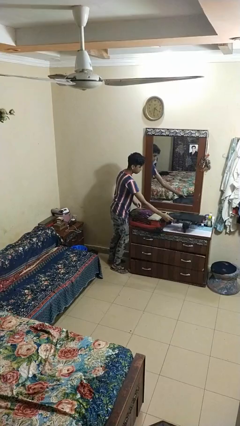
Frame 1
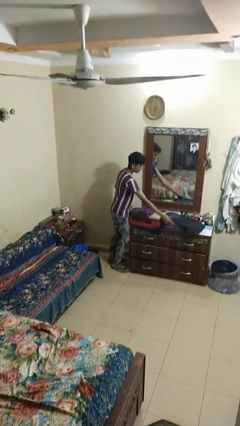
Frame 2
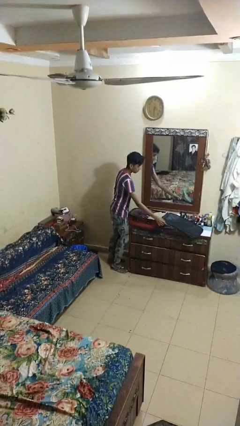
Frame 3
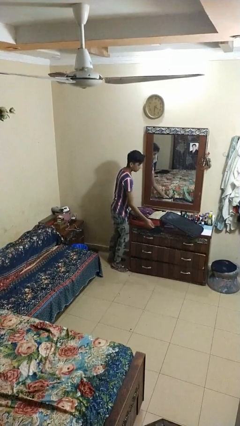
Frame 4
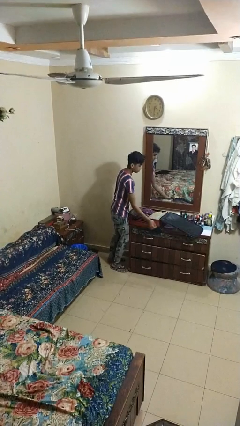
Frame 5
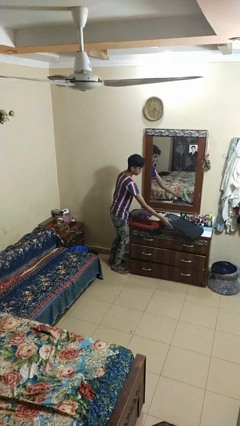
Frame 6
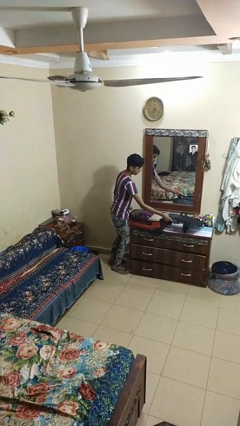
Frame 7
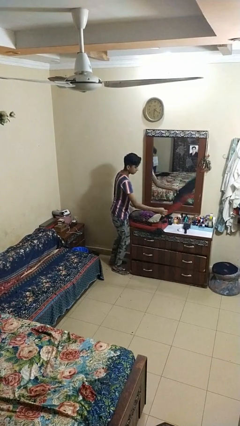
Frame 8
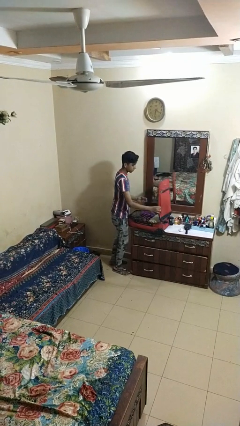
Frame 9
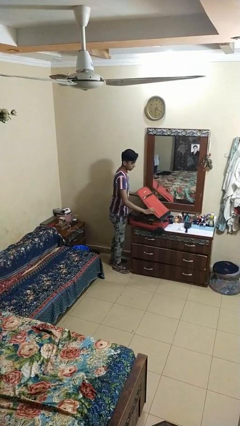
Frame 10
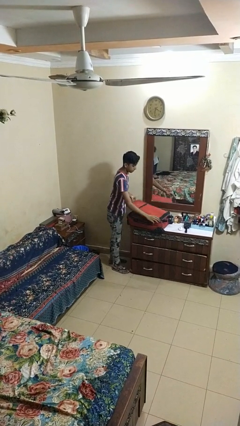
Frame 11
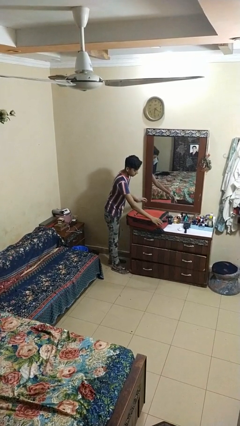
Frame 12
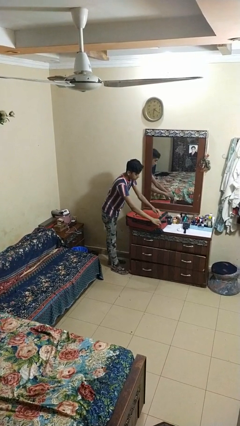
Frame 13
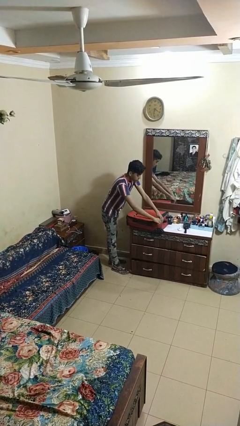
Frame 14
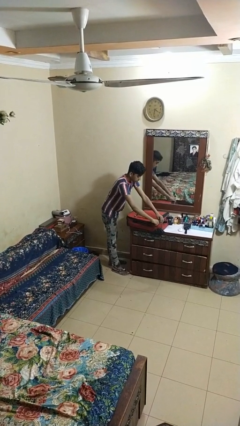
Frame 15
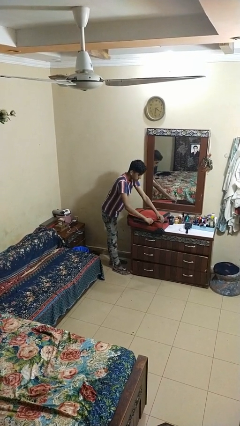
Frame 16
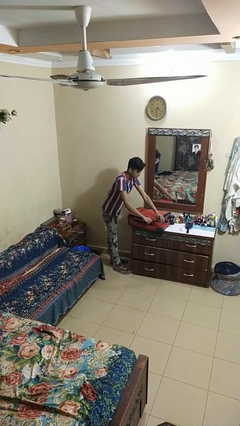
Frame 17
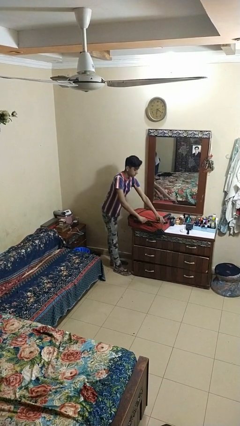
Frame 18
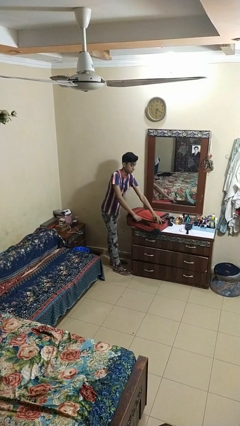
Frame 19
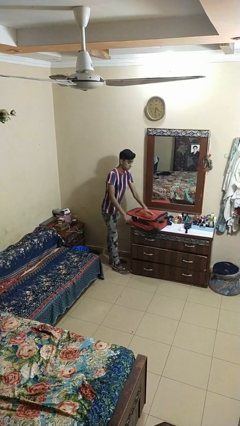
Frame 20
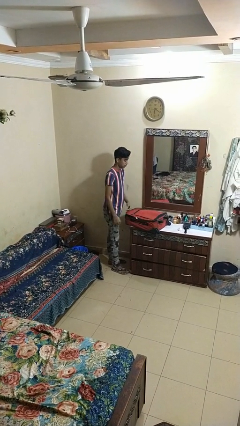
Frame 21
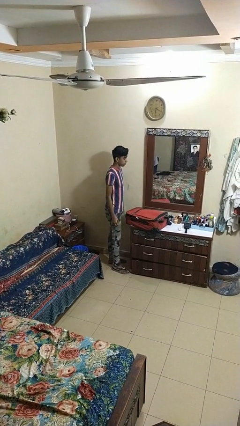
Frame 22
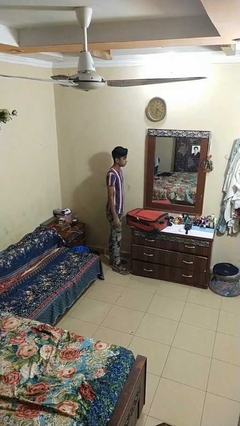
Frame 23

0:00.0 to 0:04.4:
person closes suitcase

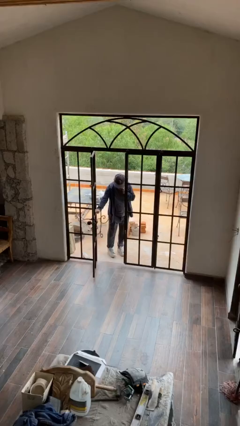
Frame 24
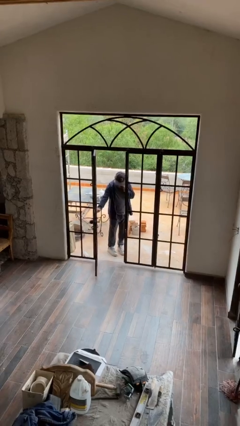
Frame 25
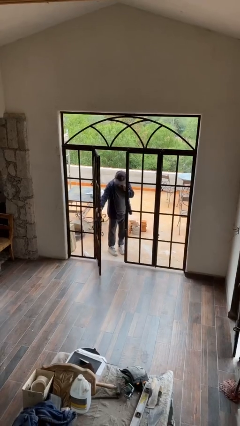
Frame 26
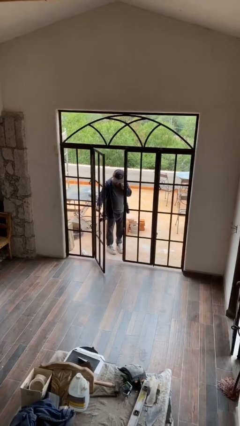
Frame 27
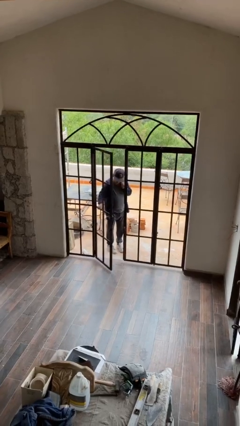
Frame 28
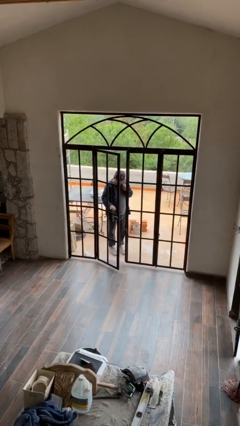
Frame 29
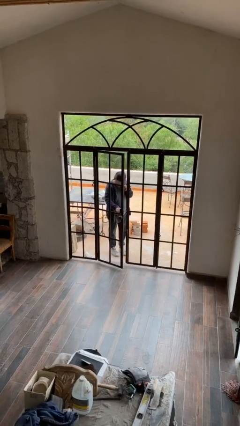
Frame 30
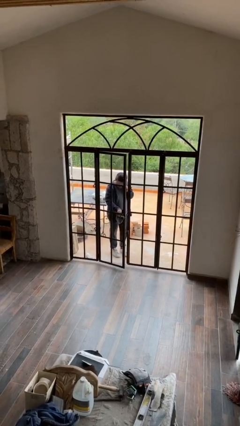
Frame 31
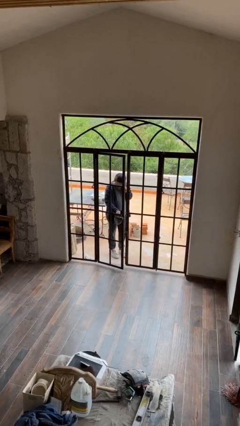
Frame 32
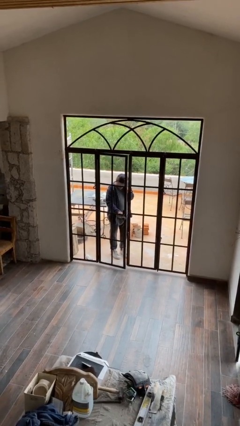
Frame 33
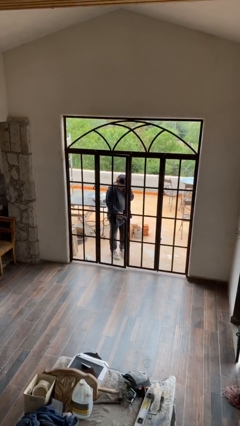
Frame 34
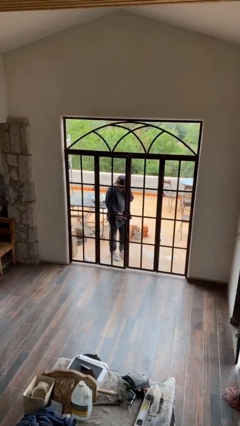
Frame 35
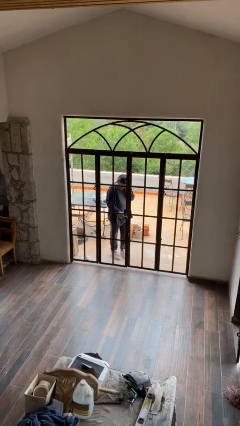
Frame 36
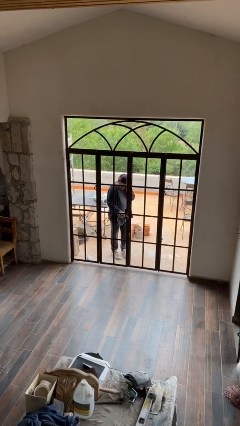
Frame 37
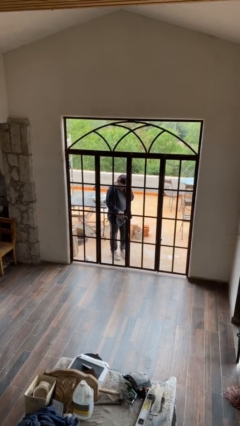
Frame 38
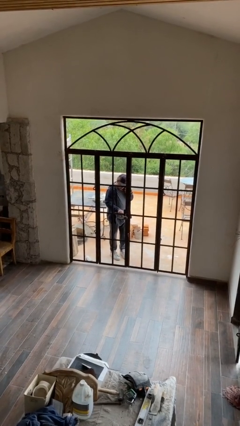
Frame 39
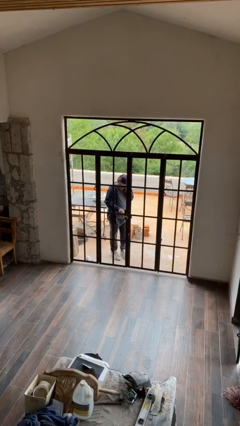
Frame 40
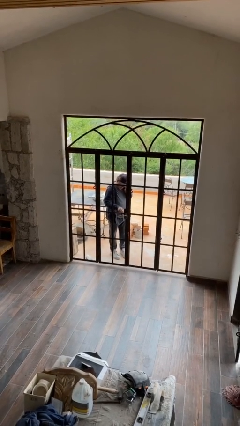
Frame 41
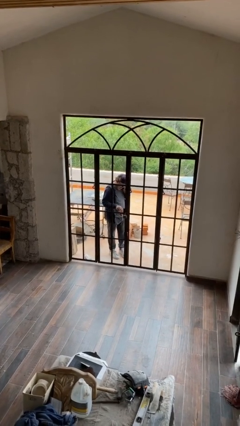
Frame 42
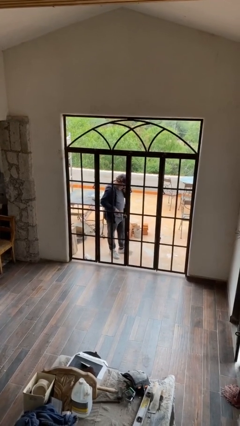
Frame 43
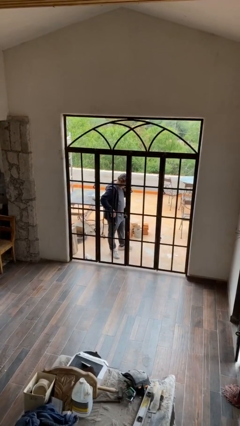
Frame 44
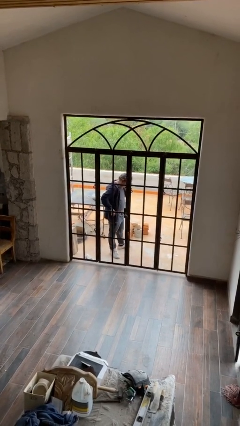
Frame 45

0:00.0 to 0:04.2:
person closes facility door

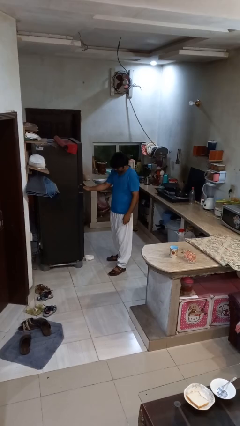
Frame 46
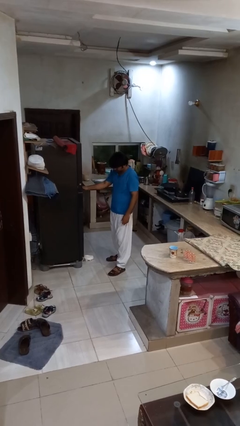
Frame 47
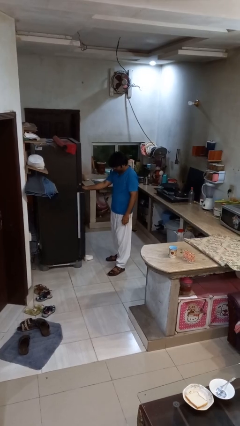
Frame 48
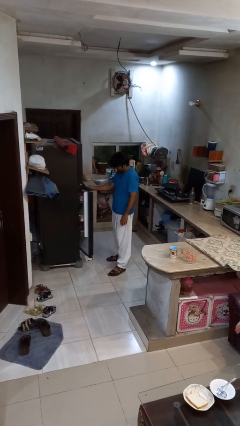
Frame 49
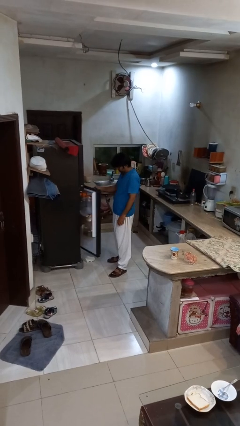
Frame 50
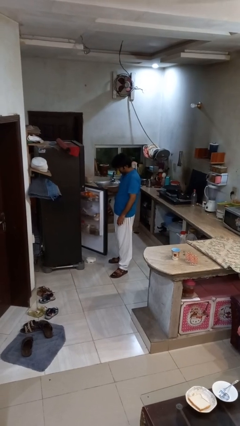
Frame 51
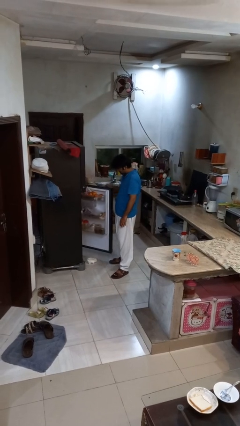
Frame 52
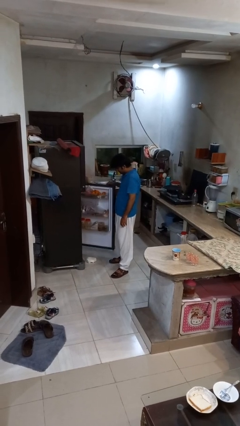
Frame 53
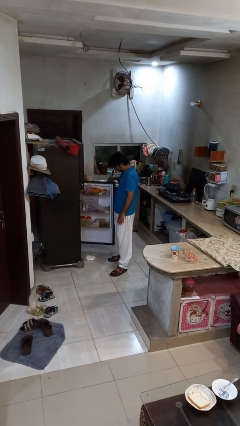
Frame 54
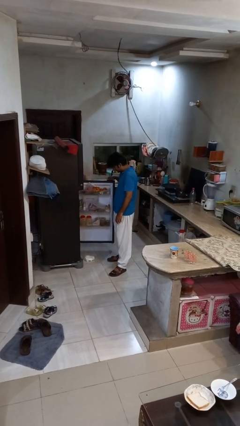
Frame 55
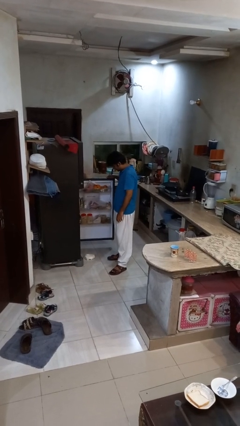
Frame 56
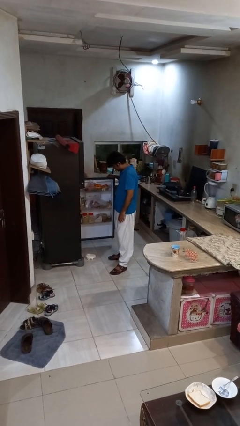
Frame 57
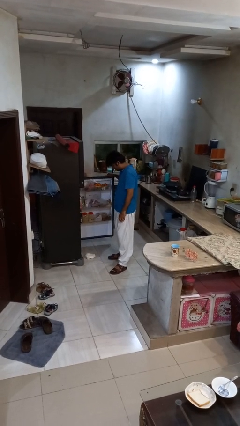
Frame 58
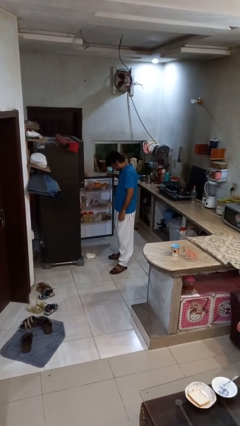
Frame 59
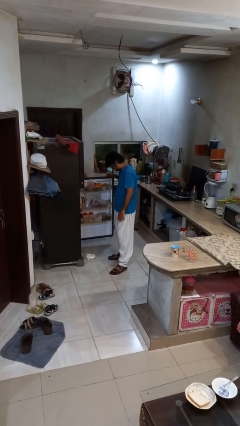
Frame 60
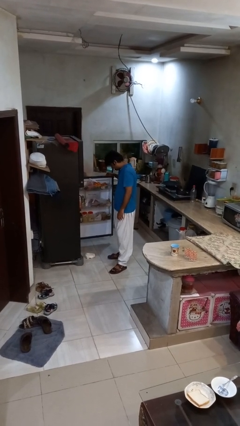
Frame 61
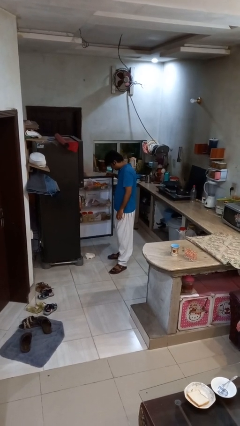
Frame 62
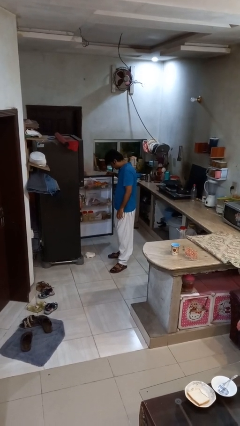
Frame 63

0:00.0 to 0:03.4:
person opens refrigerator

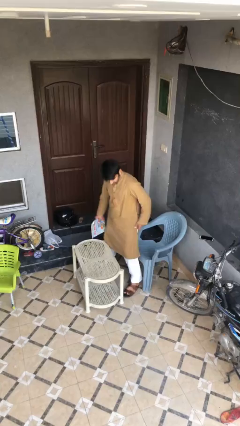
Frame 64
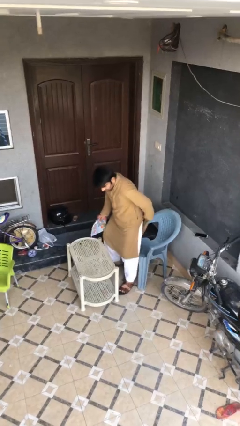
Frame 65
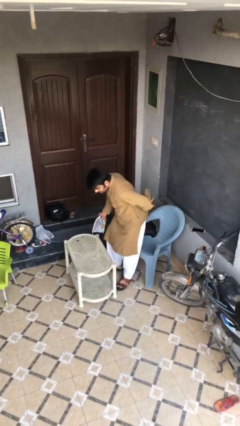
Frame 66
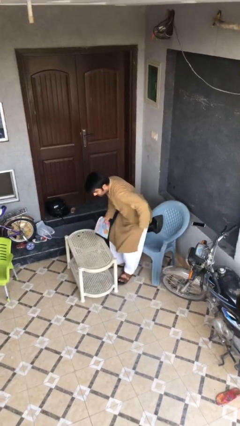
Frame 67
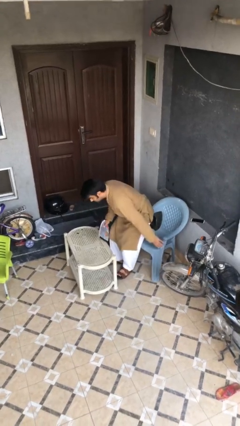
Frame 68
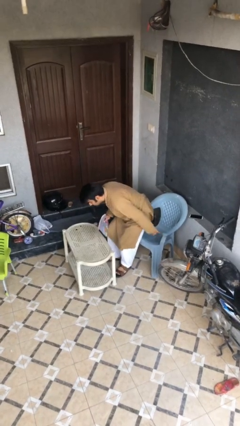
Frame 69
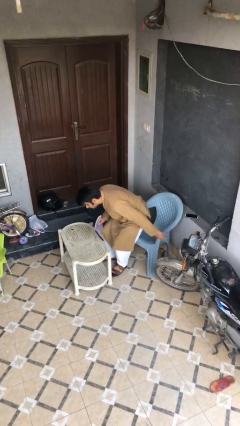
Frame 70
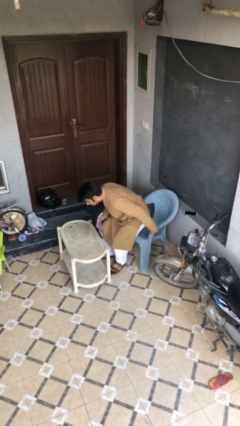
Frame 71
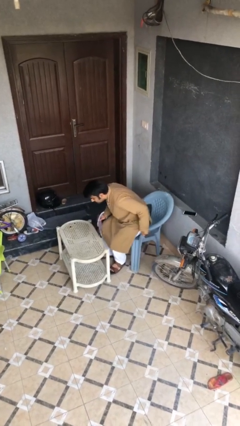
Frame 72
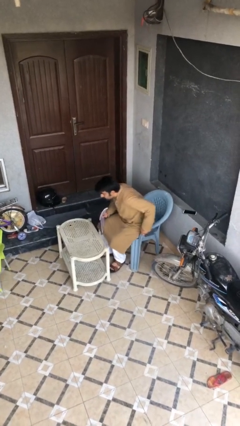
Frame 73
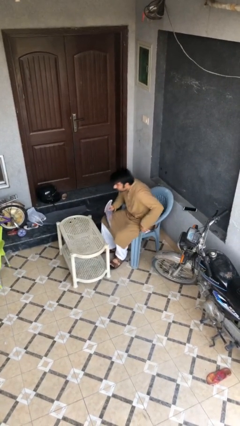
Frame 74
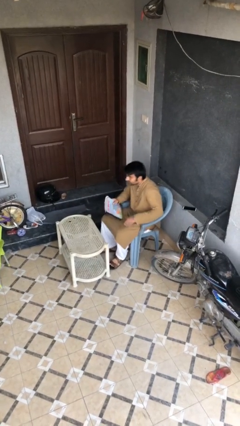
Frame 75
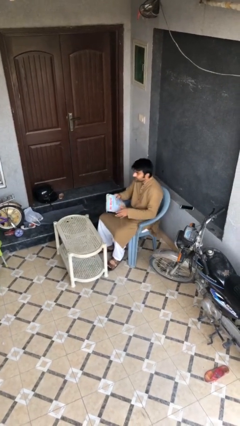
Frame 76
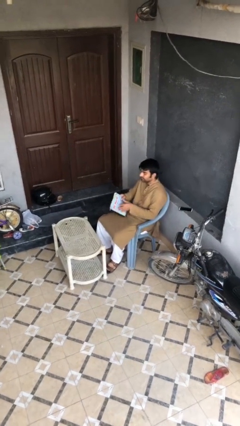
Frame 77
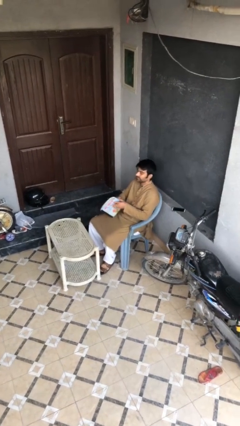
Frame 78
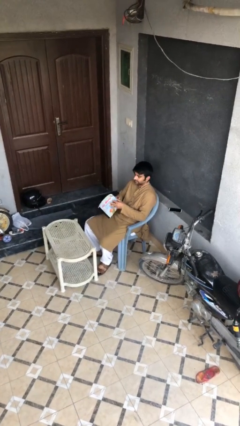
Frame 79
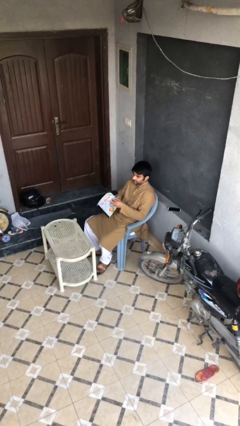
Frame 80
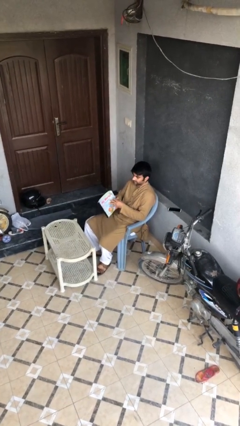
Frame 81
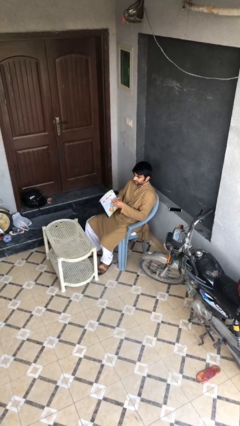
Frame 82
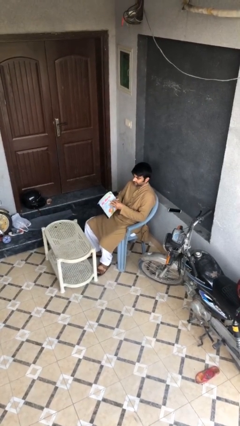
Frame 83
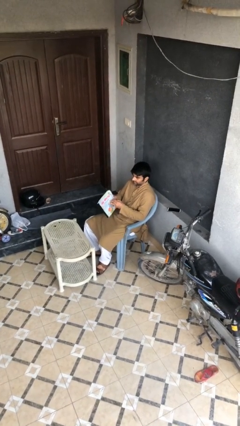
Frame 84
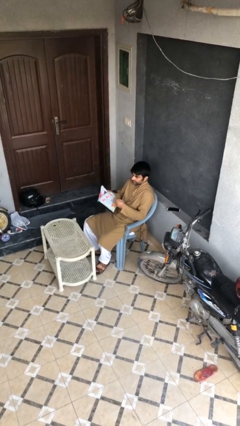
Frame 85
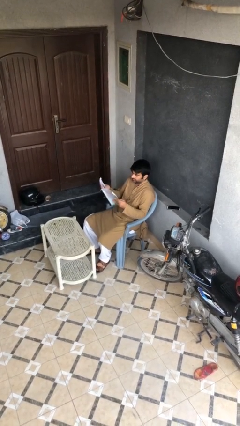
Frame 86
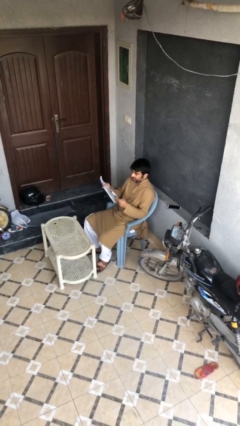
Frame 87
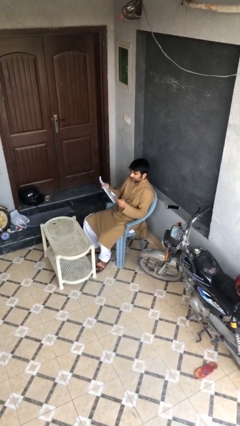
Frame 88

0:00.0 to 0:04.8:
person sits down

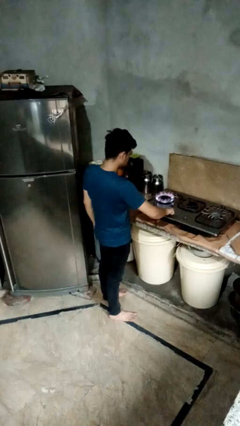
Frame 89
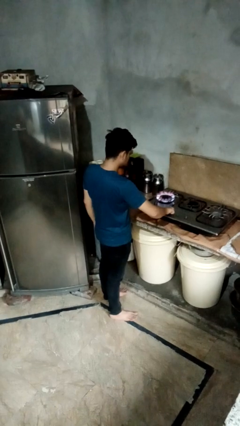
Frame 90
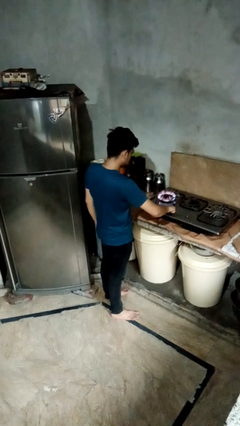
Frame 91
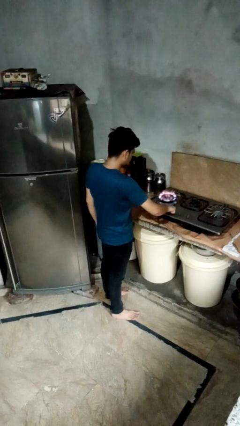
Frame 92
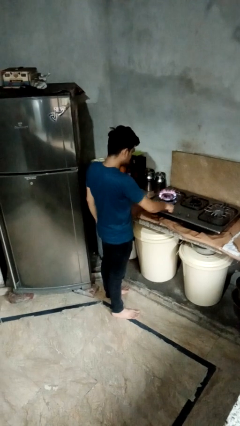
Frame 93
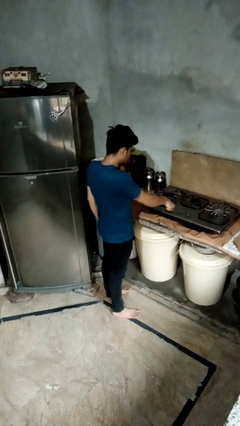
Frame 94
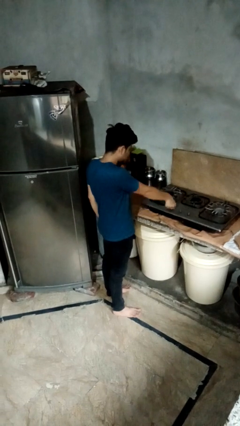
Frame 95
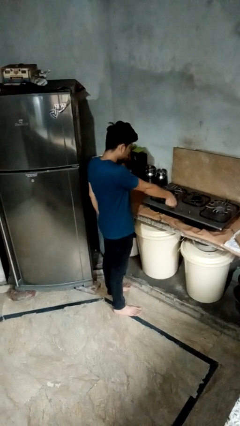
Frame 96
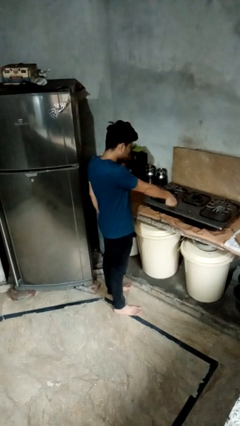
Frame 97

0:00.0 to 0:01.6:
person turns off stovetop
